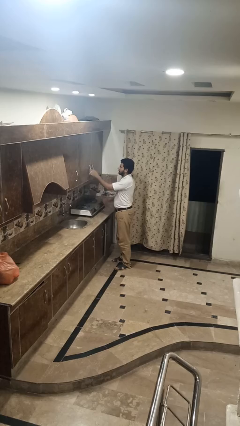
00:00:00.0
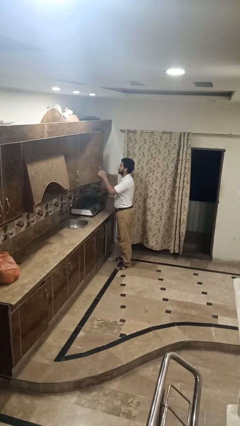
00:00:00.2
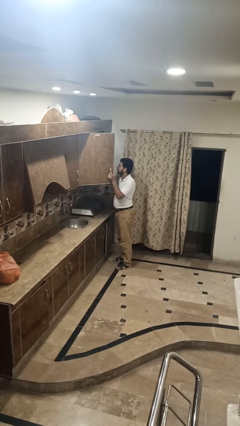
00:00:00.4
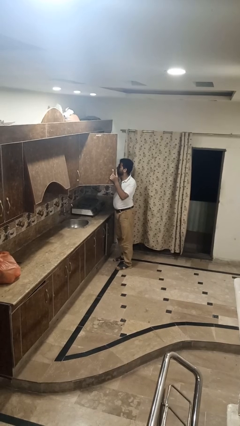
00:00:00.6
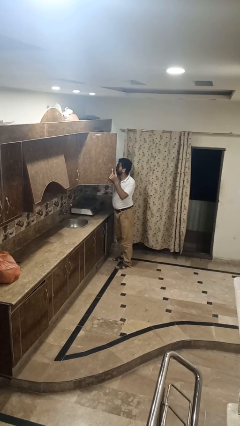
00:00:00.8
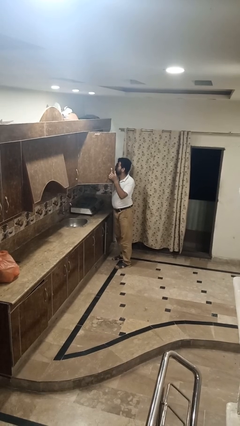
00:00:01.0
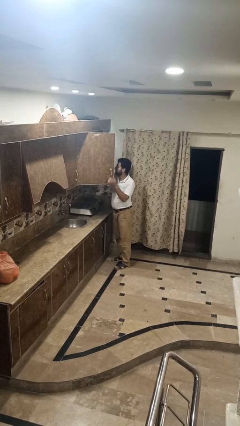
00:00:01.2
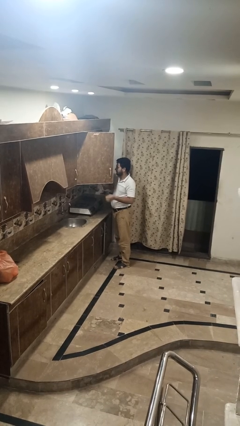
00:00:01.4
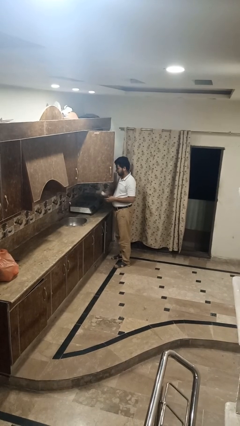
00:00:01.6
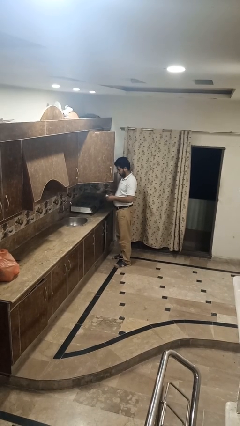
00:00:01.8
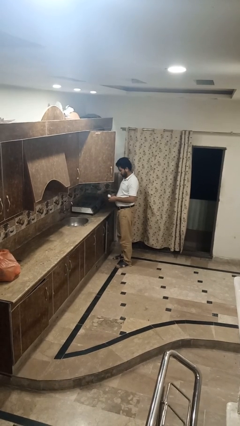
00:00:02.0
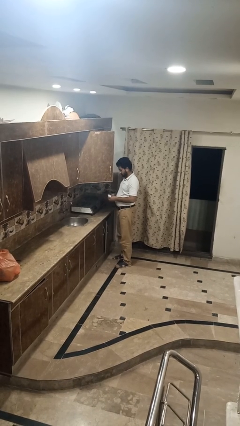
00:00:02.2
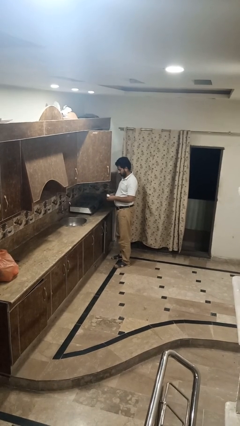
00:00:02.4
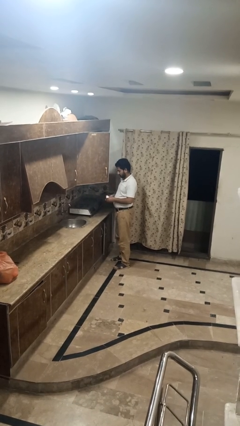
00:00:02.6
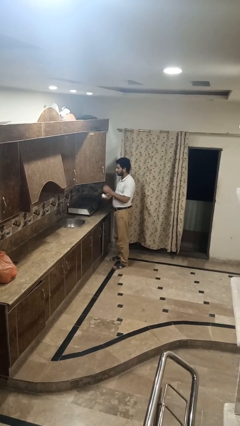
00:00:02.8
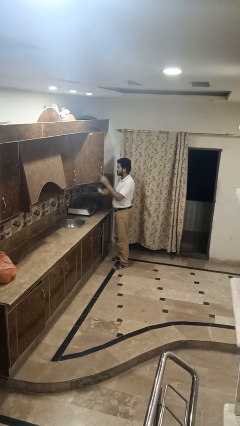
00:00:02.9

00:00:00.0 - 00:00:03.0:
person takes object from kitchen drawer

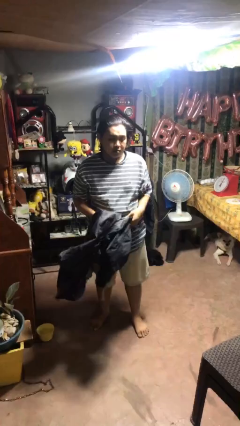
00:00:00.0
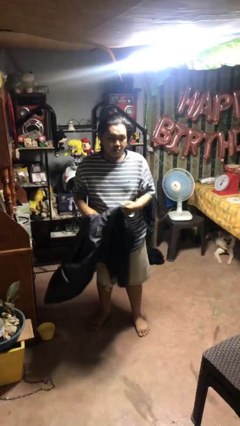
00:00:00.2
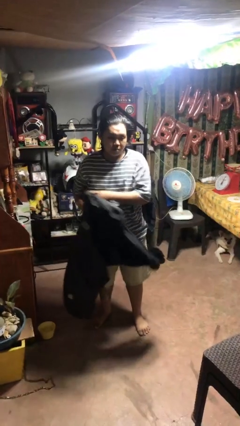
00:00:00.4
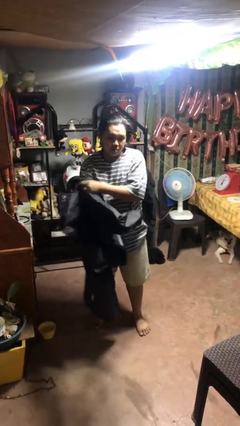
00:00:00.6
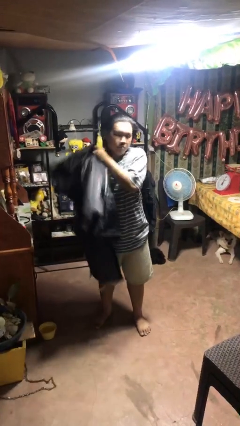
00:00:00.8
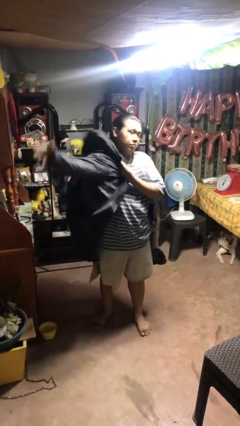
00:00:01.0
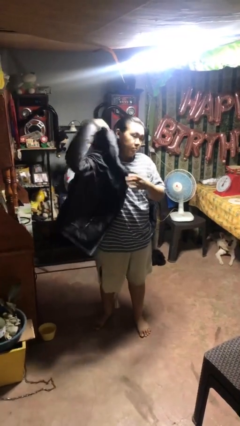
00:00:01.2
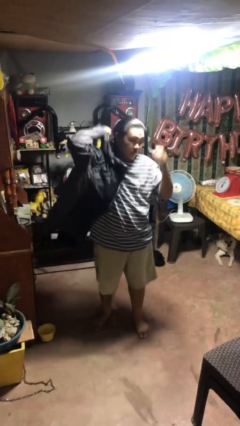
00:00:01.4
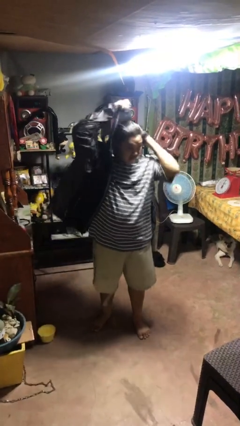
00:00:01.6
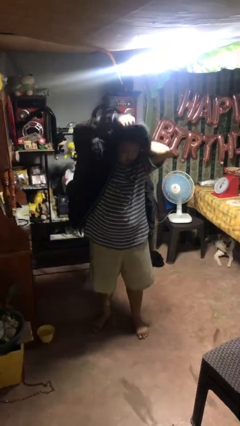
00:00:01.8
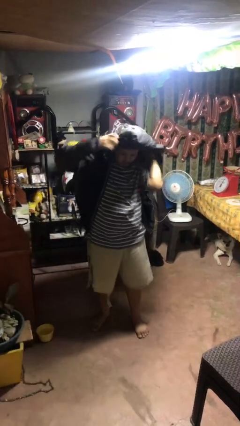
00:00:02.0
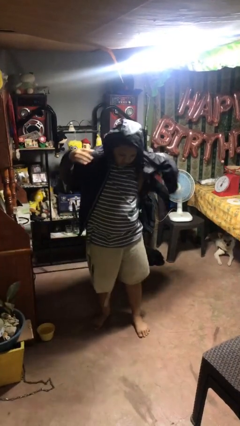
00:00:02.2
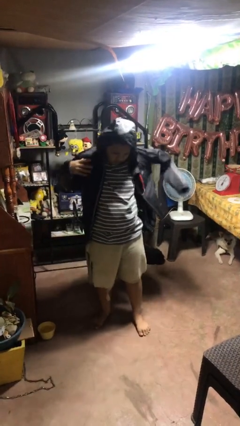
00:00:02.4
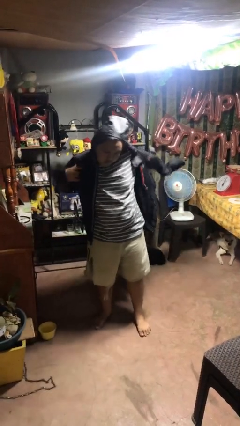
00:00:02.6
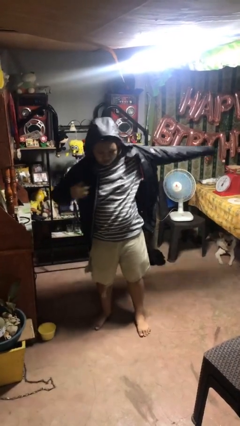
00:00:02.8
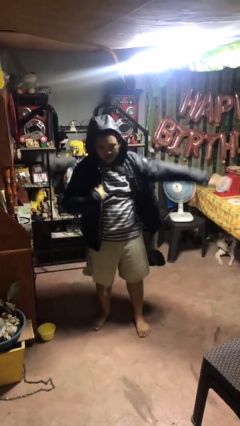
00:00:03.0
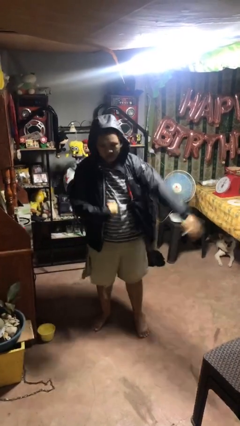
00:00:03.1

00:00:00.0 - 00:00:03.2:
person puts on hoodie

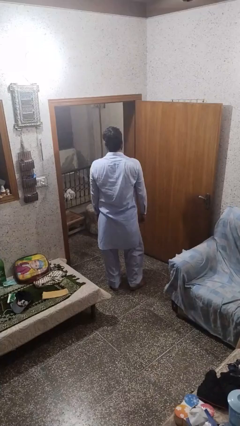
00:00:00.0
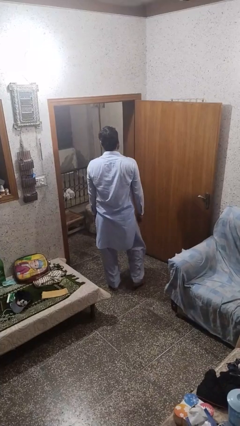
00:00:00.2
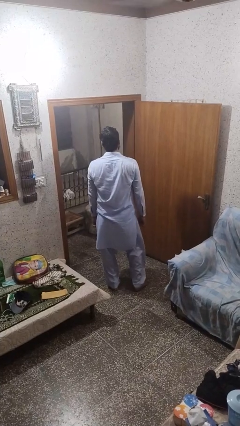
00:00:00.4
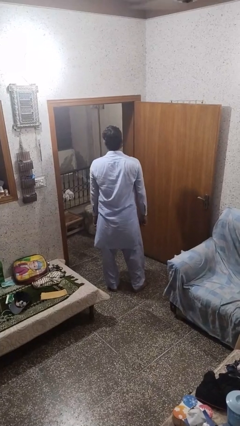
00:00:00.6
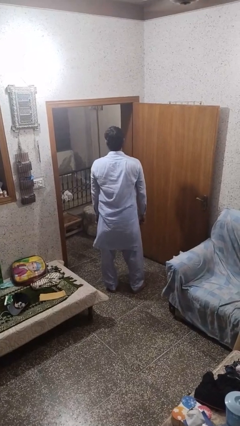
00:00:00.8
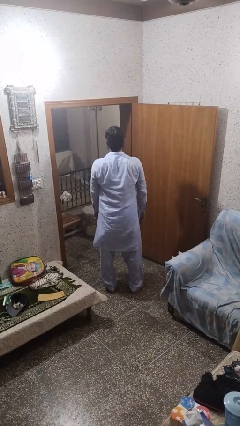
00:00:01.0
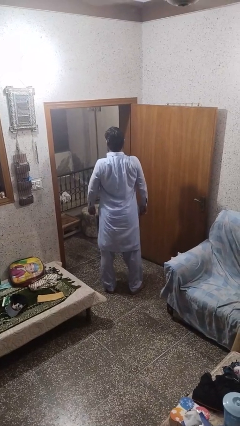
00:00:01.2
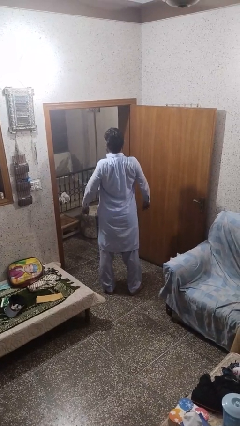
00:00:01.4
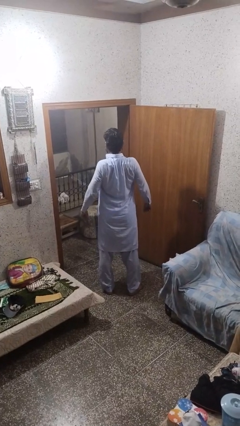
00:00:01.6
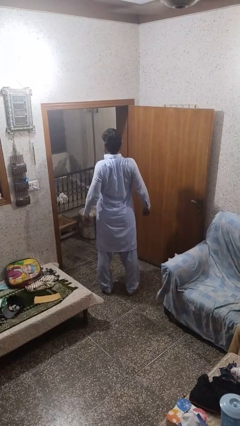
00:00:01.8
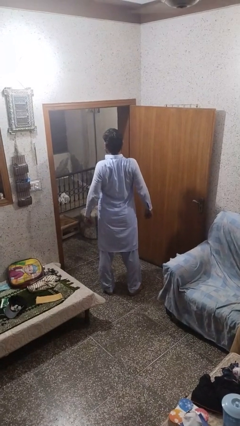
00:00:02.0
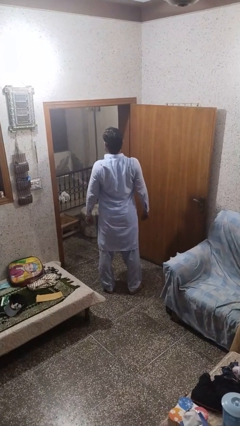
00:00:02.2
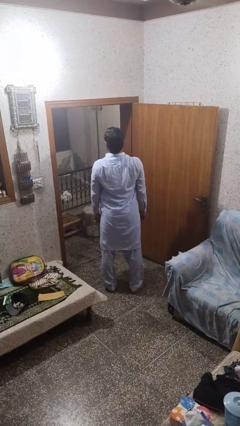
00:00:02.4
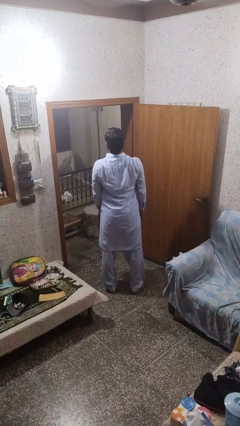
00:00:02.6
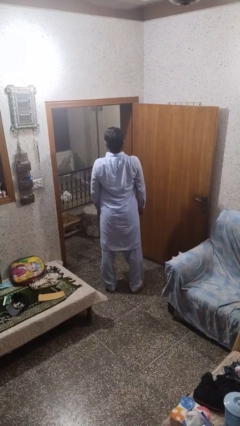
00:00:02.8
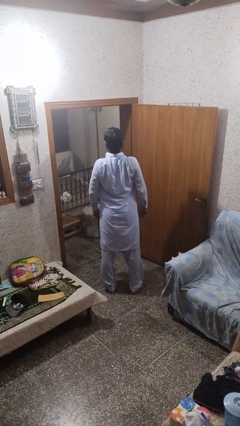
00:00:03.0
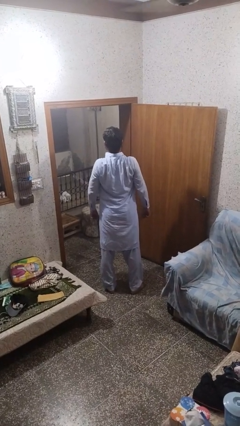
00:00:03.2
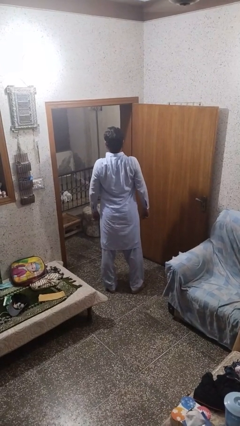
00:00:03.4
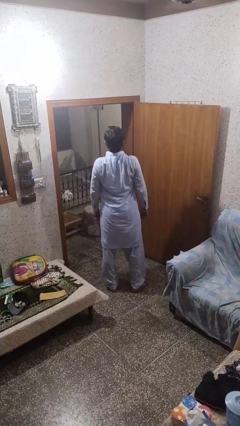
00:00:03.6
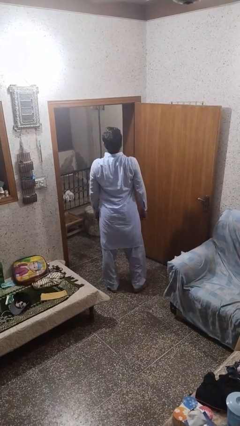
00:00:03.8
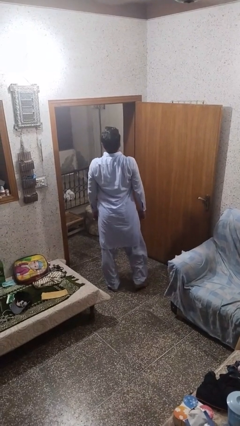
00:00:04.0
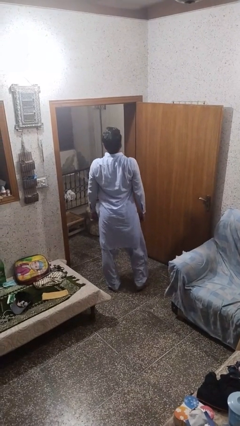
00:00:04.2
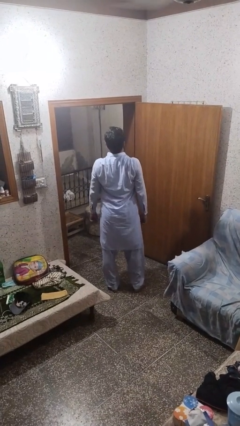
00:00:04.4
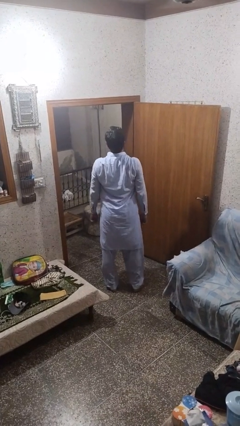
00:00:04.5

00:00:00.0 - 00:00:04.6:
person stretches back

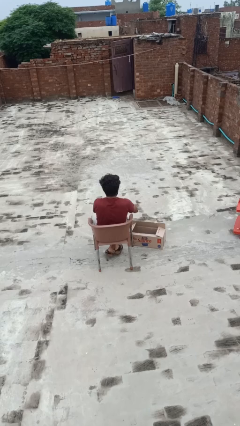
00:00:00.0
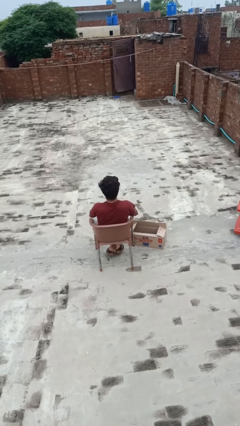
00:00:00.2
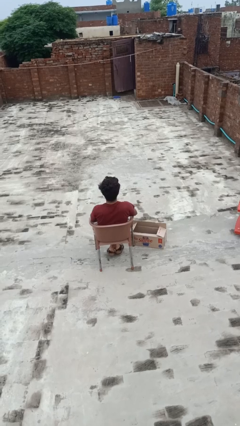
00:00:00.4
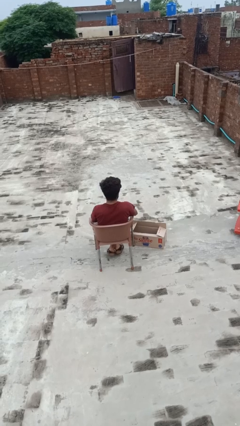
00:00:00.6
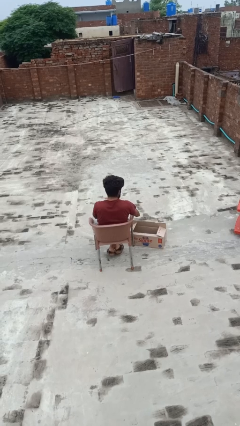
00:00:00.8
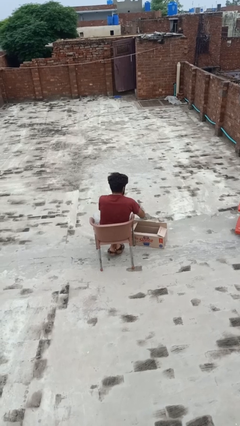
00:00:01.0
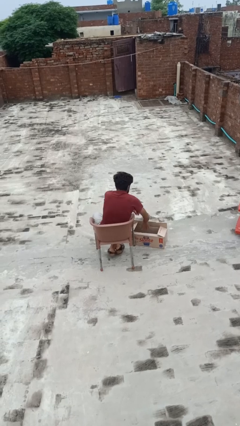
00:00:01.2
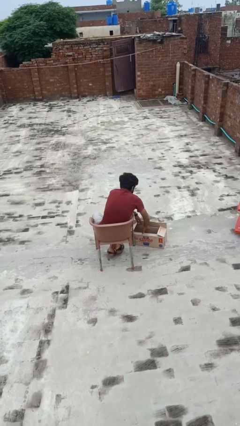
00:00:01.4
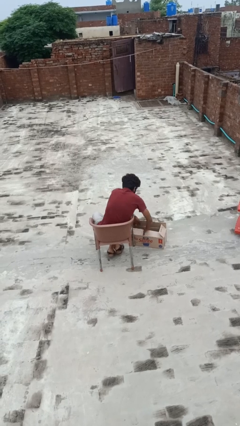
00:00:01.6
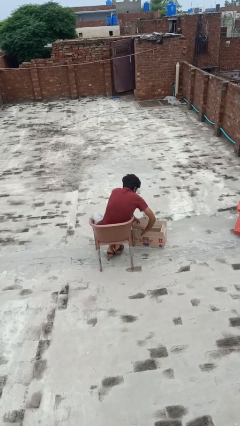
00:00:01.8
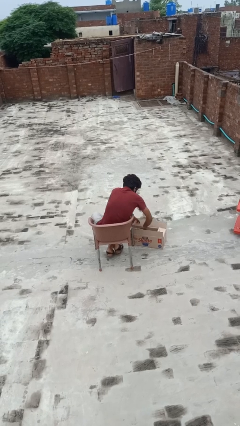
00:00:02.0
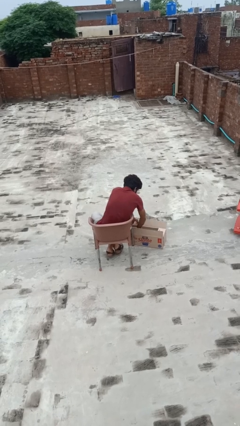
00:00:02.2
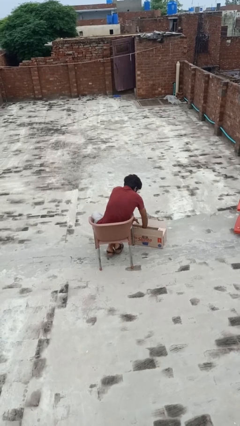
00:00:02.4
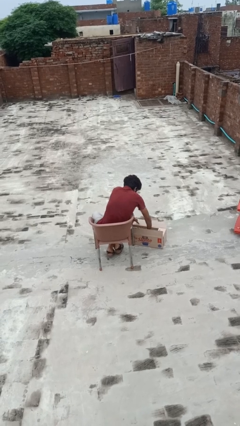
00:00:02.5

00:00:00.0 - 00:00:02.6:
person searches in bag

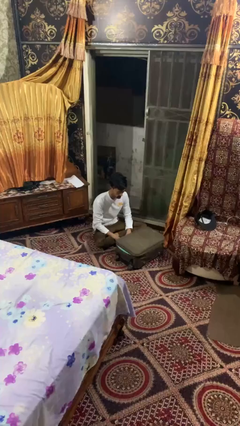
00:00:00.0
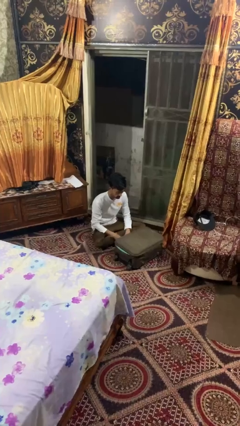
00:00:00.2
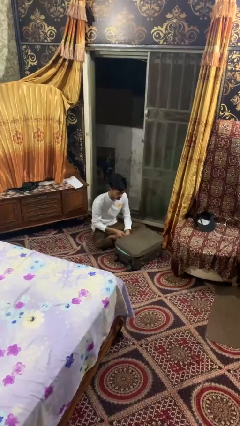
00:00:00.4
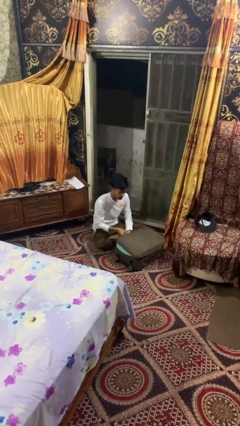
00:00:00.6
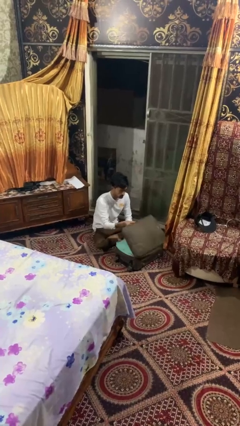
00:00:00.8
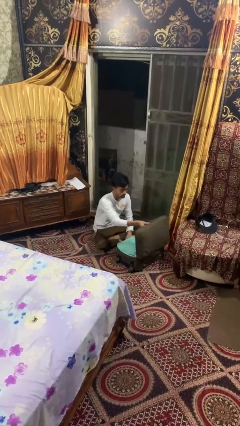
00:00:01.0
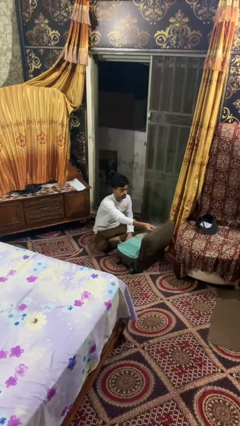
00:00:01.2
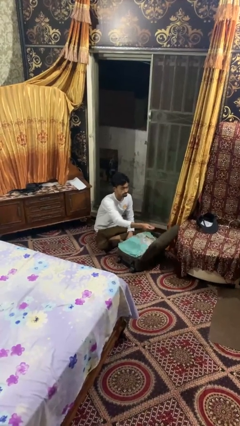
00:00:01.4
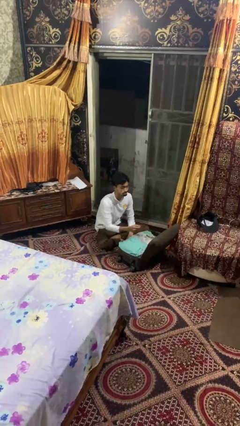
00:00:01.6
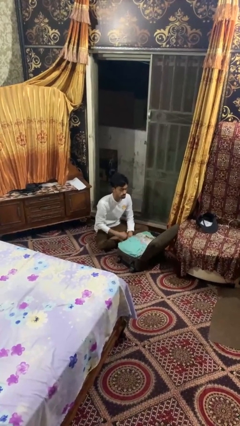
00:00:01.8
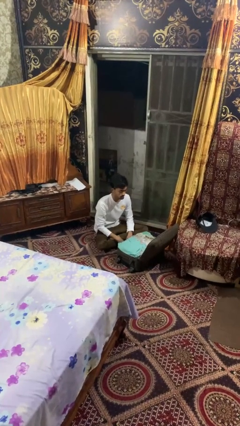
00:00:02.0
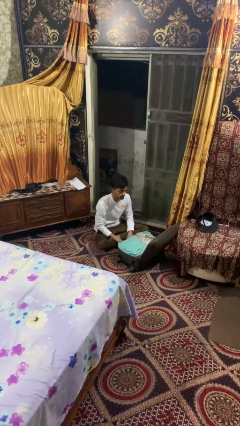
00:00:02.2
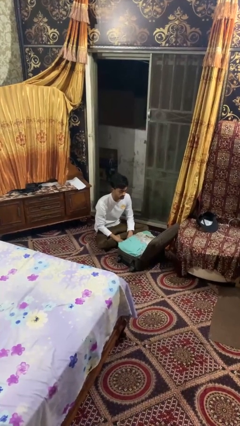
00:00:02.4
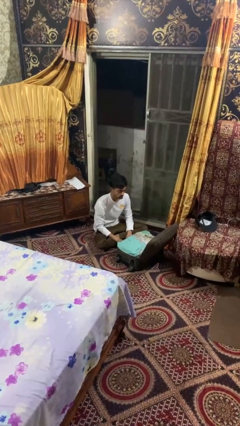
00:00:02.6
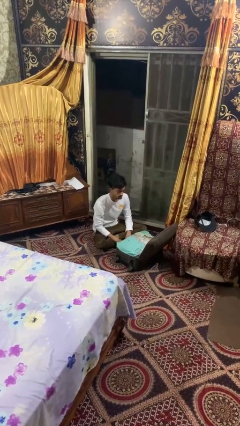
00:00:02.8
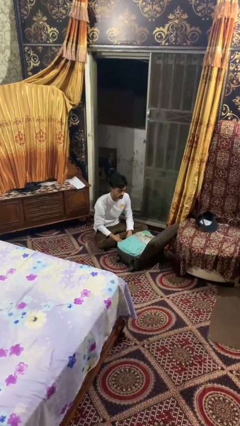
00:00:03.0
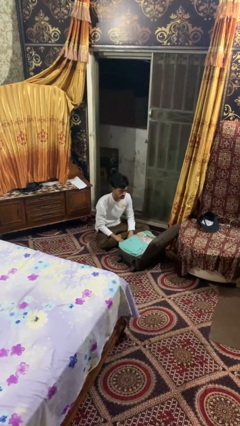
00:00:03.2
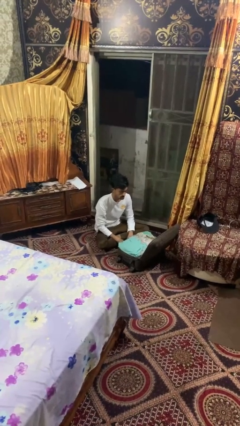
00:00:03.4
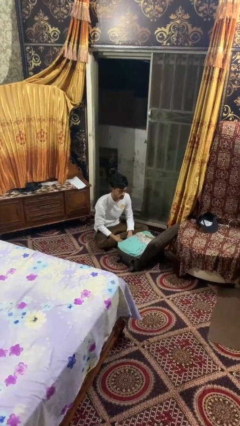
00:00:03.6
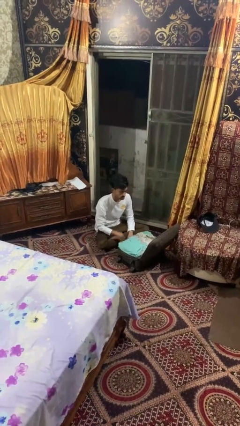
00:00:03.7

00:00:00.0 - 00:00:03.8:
person opens suitcase

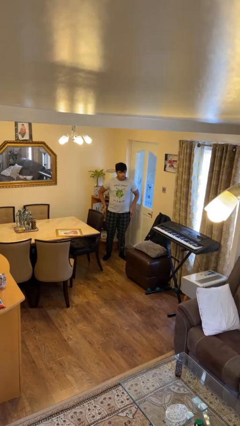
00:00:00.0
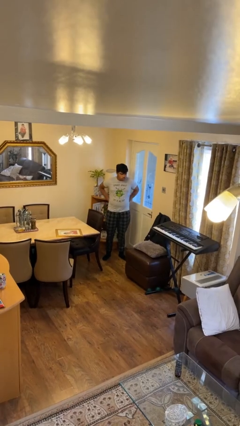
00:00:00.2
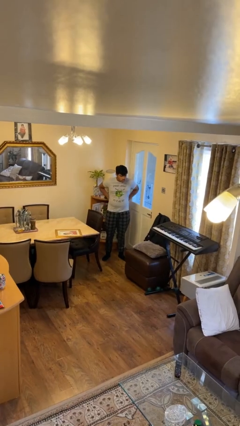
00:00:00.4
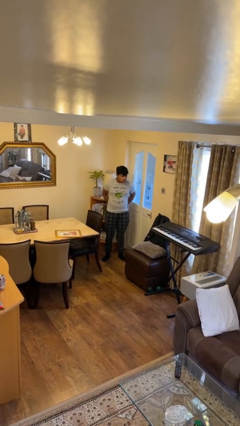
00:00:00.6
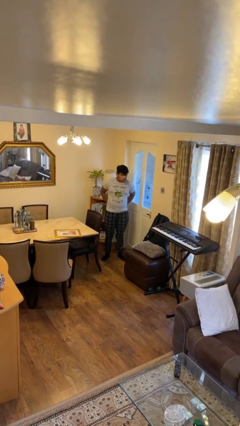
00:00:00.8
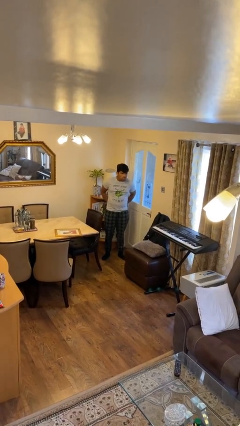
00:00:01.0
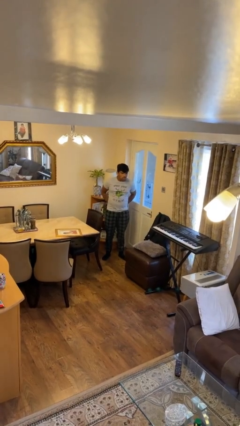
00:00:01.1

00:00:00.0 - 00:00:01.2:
person puts hands in back pockets
